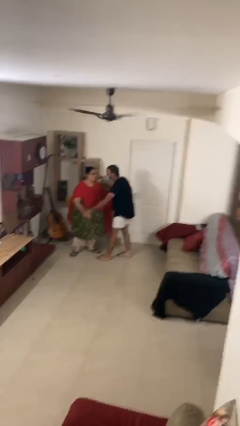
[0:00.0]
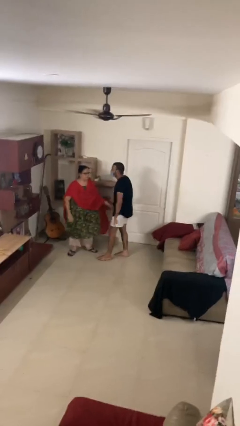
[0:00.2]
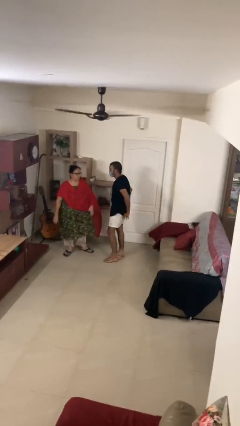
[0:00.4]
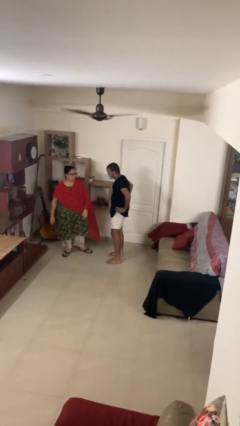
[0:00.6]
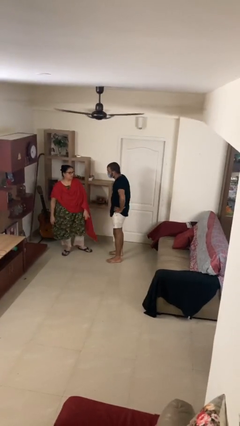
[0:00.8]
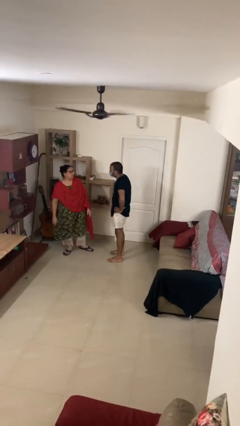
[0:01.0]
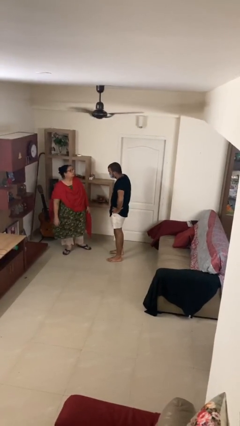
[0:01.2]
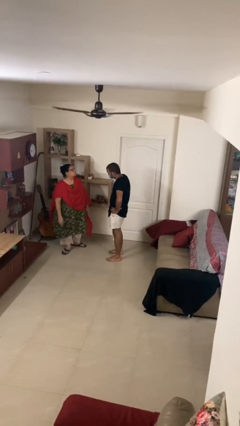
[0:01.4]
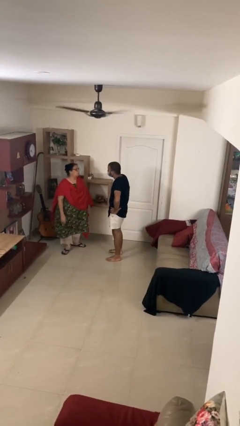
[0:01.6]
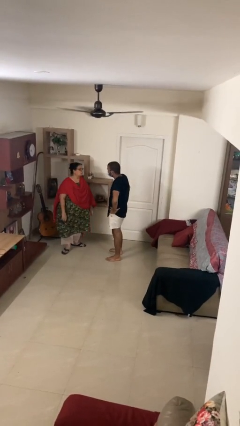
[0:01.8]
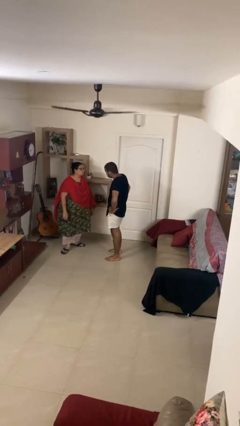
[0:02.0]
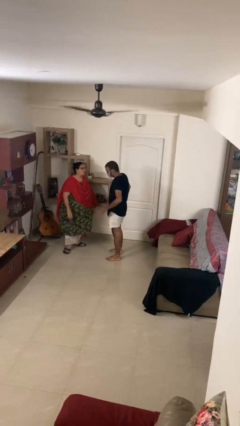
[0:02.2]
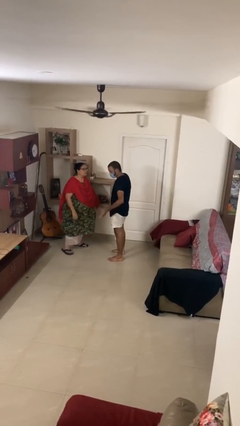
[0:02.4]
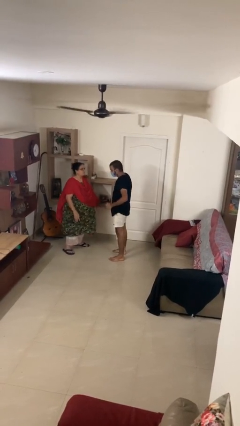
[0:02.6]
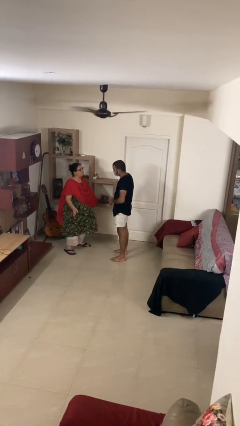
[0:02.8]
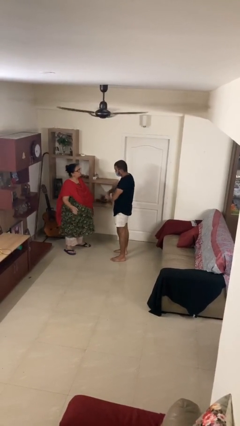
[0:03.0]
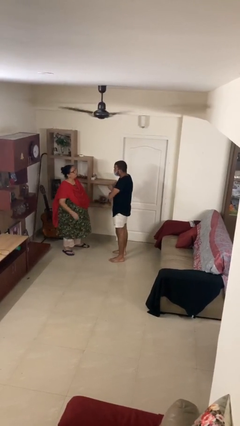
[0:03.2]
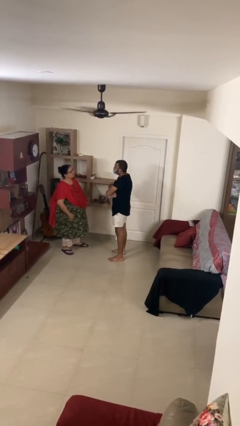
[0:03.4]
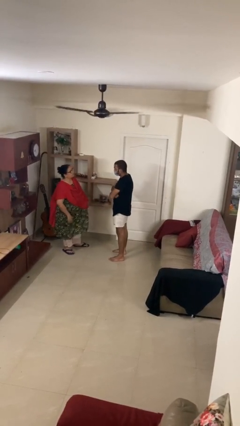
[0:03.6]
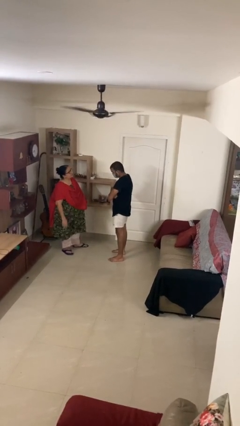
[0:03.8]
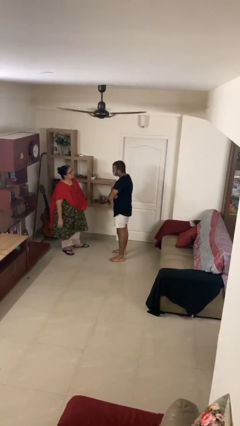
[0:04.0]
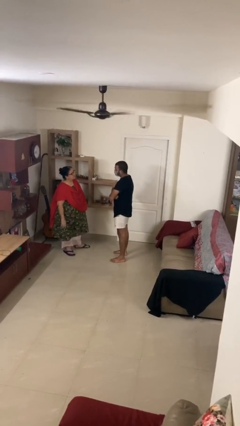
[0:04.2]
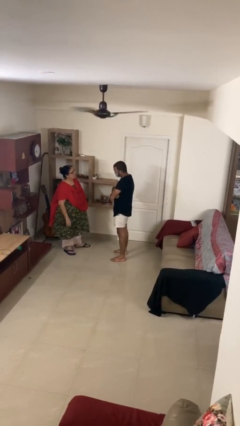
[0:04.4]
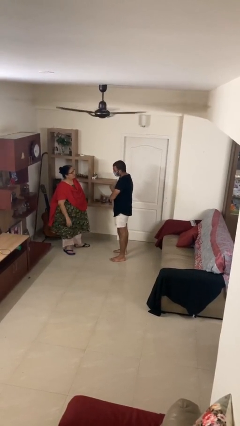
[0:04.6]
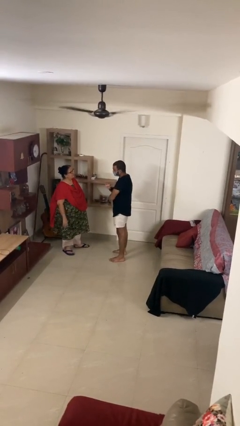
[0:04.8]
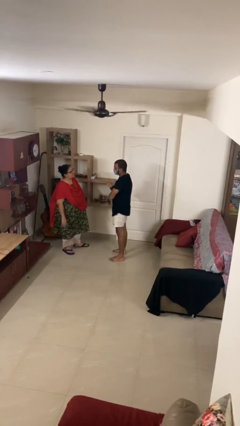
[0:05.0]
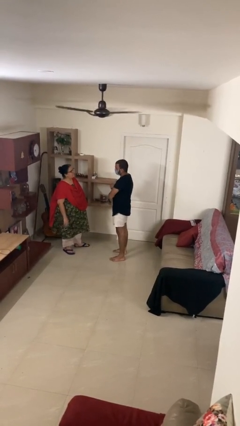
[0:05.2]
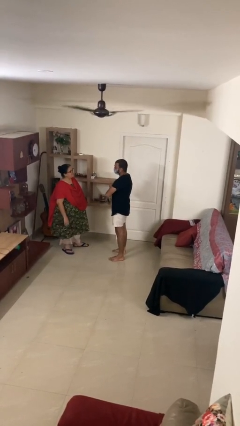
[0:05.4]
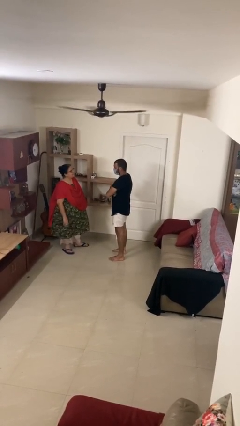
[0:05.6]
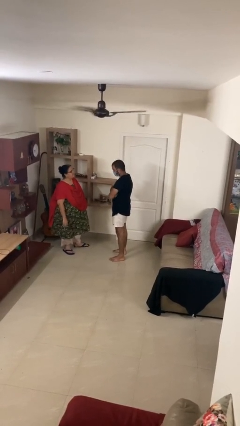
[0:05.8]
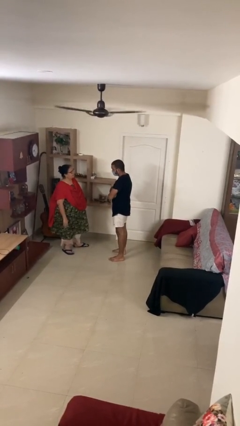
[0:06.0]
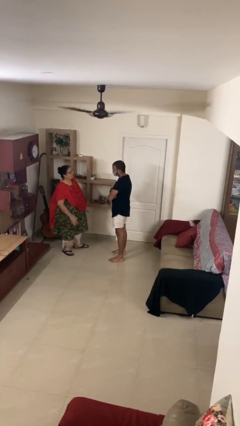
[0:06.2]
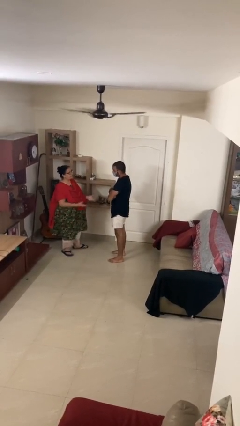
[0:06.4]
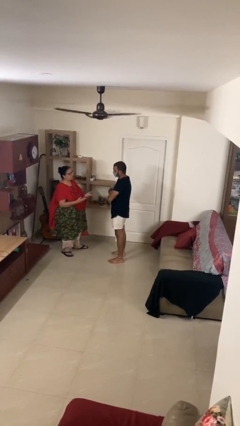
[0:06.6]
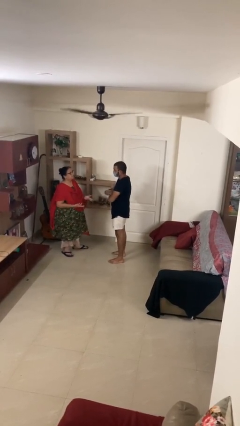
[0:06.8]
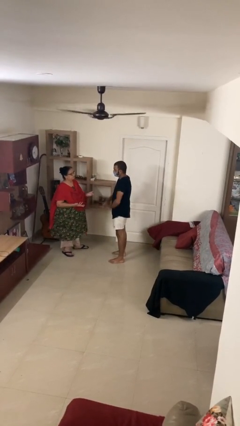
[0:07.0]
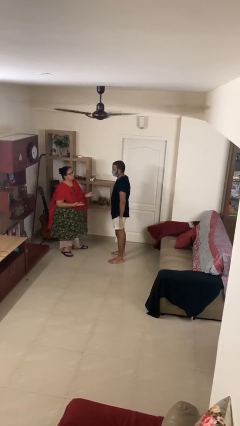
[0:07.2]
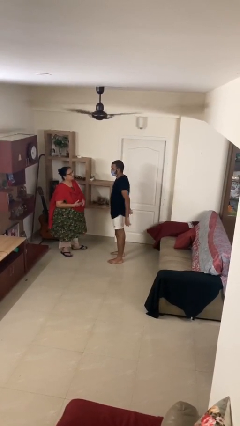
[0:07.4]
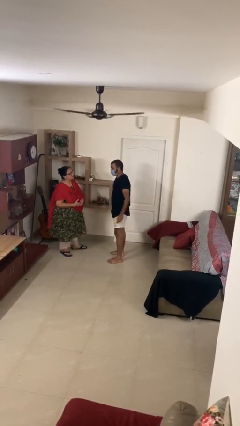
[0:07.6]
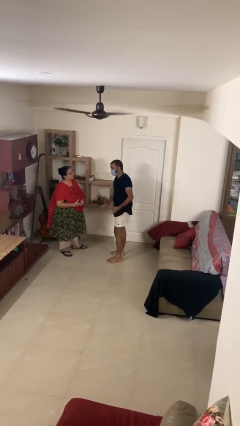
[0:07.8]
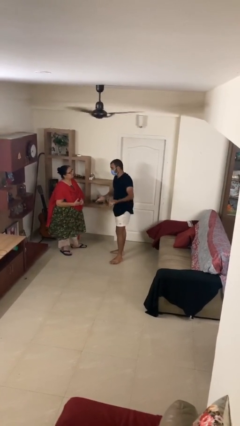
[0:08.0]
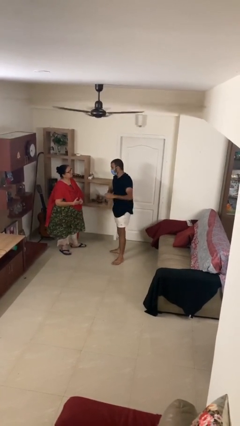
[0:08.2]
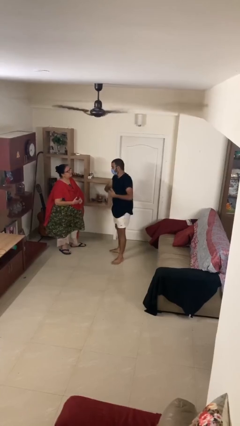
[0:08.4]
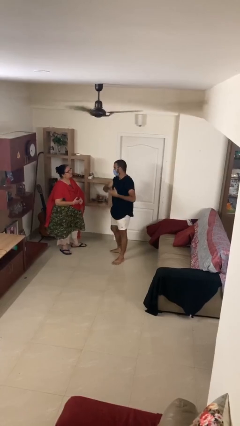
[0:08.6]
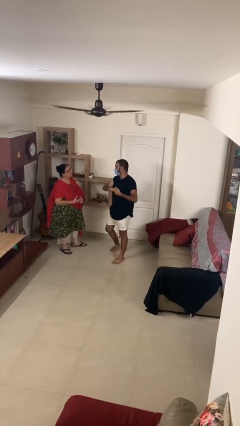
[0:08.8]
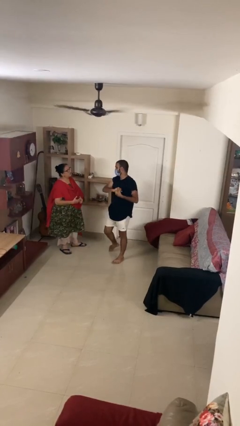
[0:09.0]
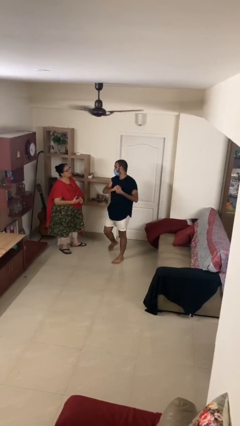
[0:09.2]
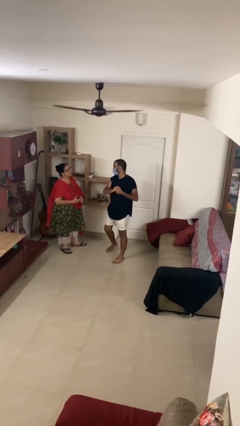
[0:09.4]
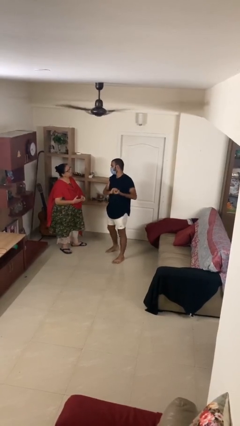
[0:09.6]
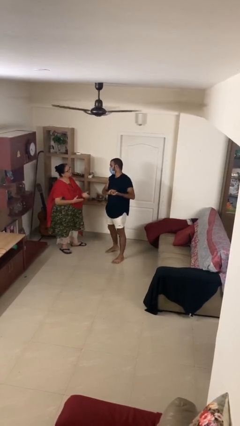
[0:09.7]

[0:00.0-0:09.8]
person talks to person

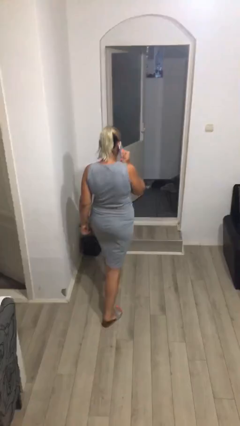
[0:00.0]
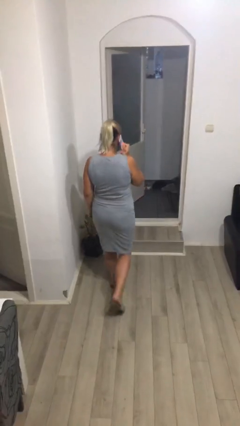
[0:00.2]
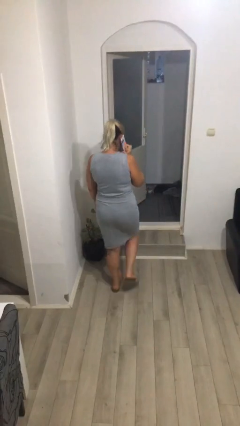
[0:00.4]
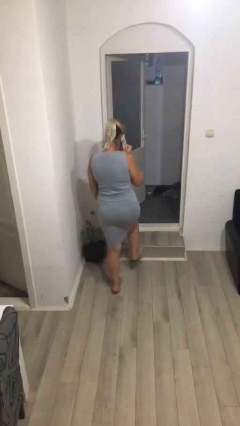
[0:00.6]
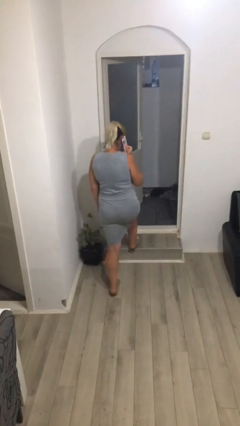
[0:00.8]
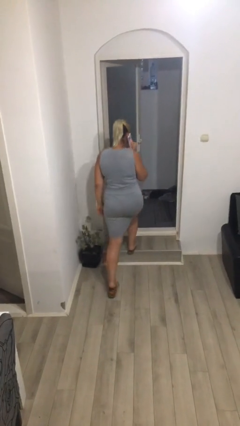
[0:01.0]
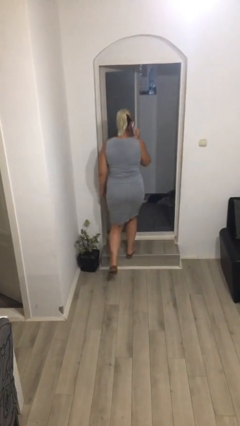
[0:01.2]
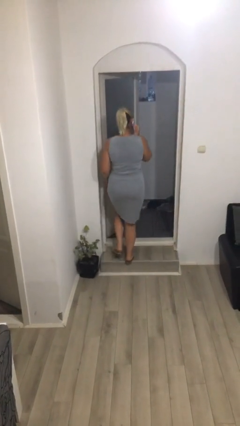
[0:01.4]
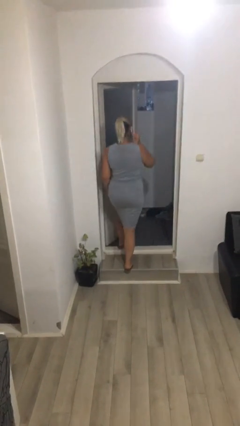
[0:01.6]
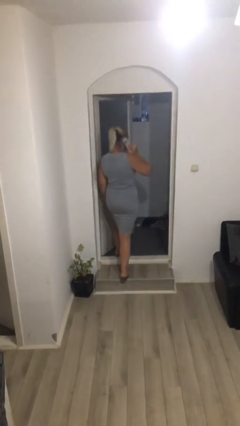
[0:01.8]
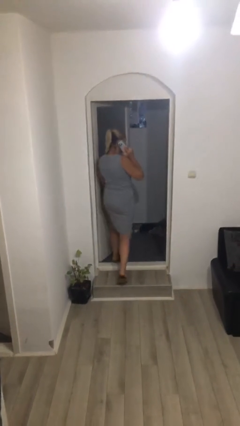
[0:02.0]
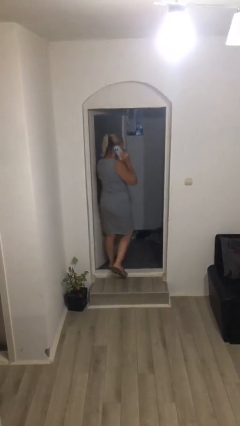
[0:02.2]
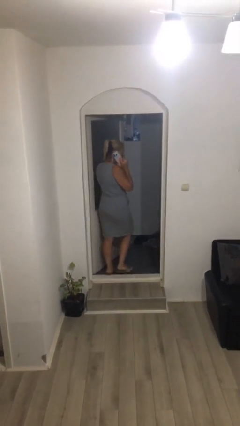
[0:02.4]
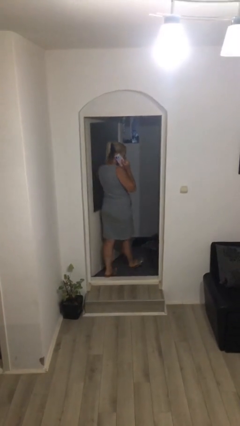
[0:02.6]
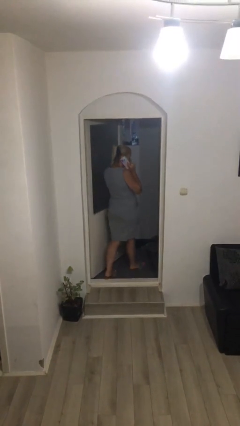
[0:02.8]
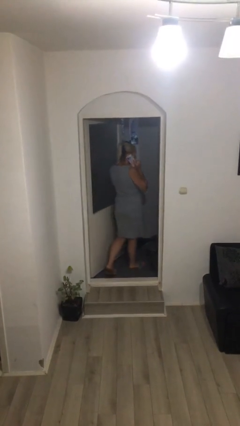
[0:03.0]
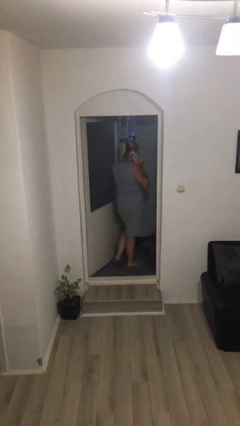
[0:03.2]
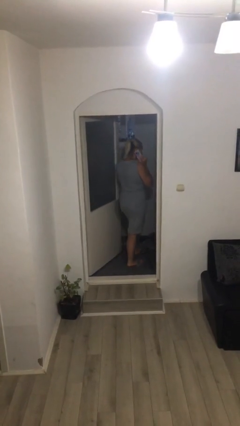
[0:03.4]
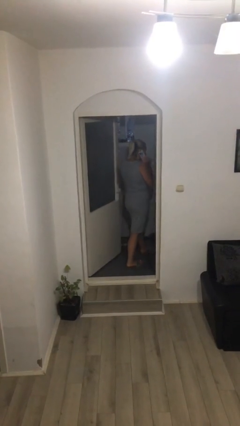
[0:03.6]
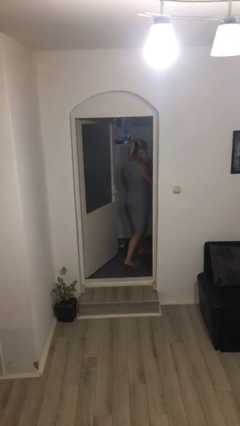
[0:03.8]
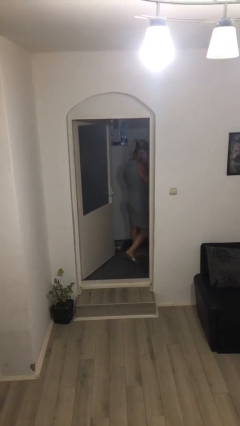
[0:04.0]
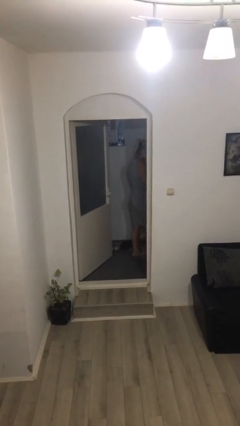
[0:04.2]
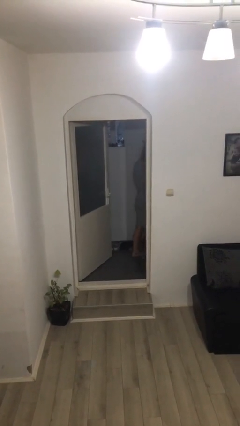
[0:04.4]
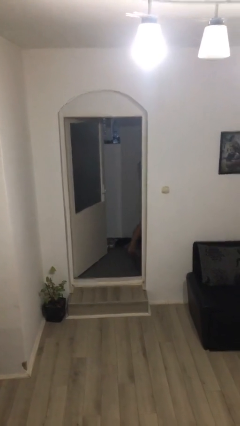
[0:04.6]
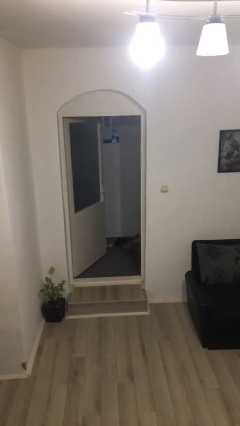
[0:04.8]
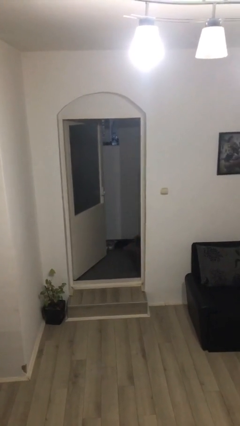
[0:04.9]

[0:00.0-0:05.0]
person exits scene through structure

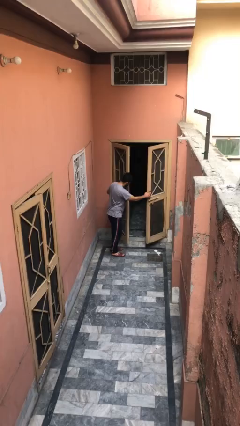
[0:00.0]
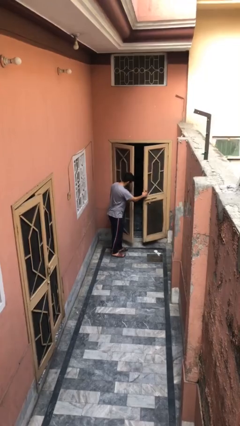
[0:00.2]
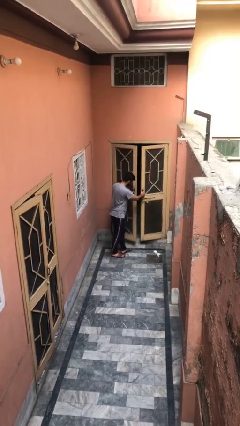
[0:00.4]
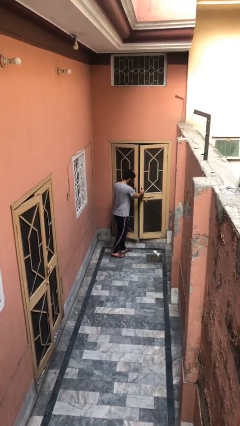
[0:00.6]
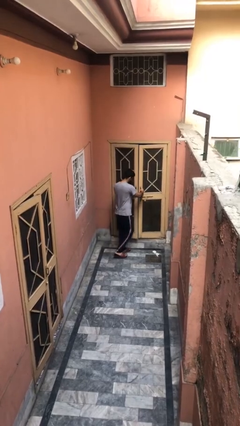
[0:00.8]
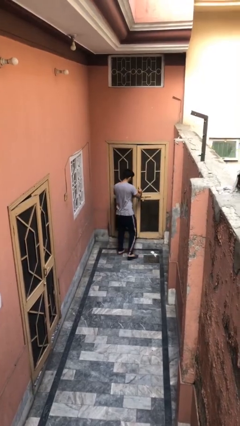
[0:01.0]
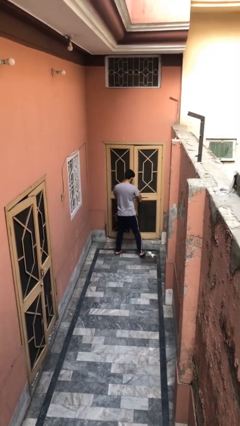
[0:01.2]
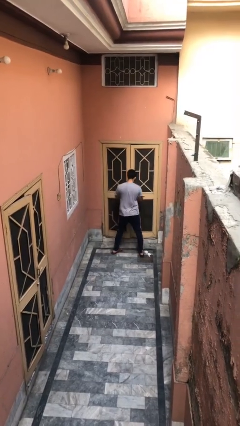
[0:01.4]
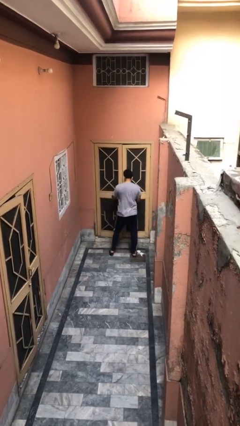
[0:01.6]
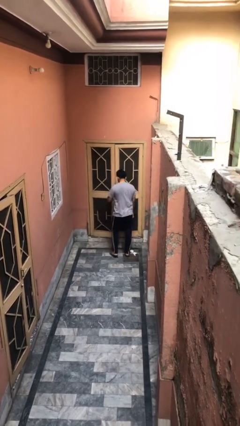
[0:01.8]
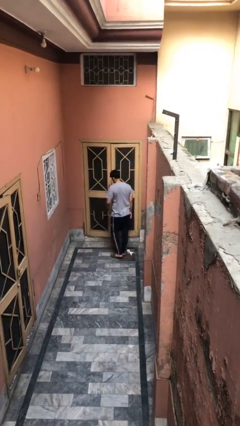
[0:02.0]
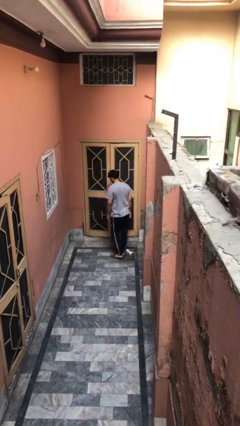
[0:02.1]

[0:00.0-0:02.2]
person closes gate

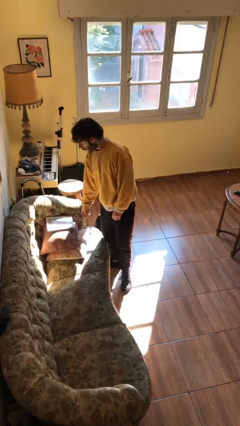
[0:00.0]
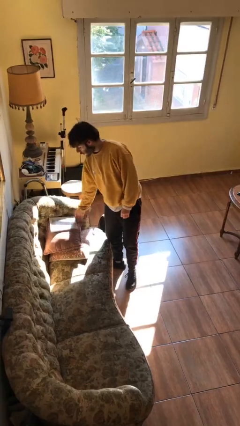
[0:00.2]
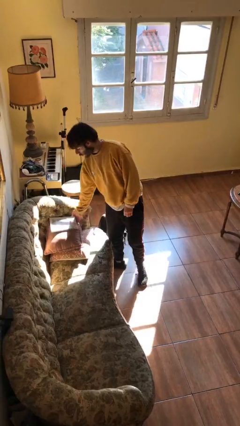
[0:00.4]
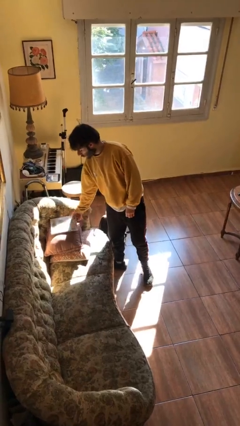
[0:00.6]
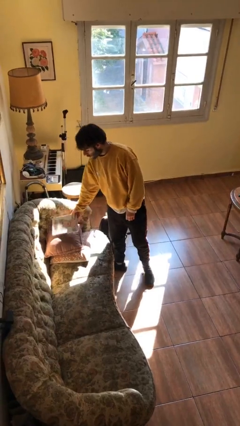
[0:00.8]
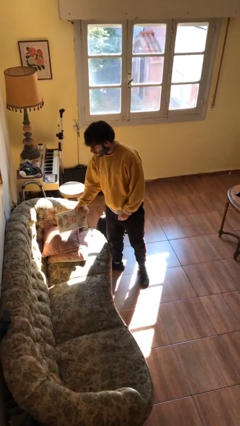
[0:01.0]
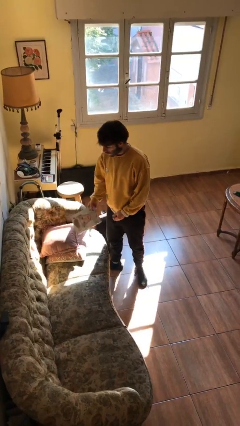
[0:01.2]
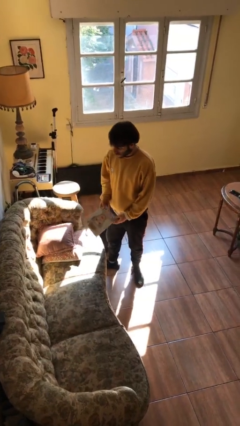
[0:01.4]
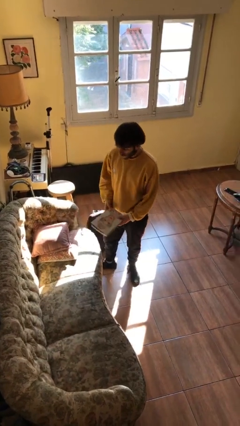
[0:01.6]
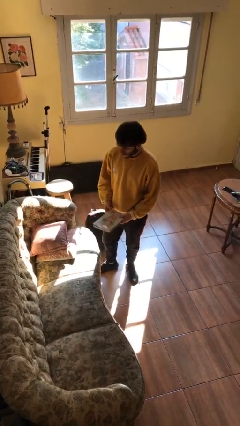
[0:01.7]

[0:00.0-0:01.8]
person picks up object from couch
